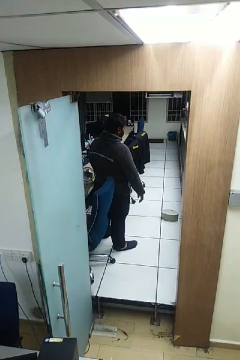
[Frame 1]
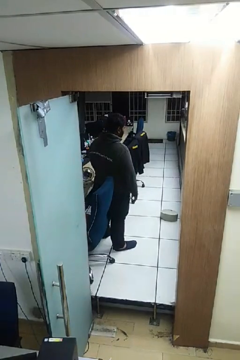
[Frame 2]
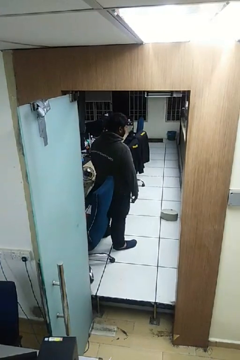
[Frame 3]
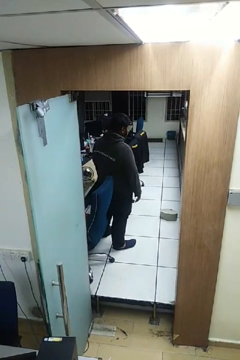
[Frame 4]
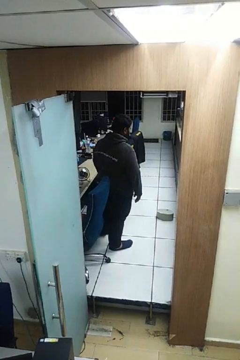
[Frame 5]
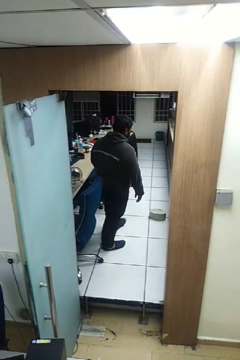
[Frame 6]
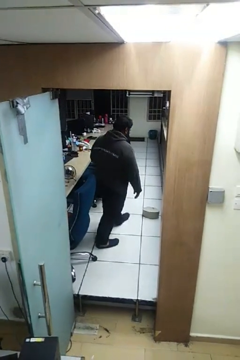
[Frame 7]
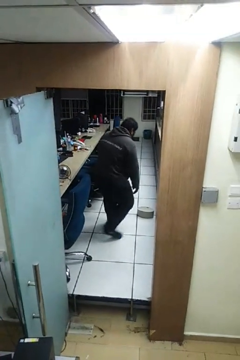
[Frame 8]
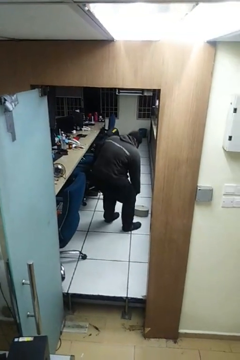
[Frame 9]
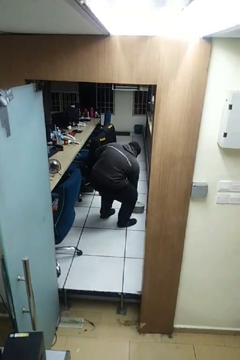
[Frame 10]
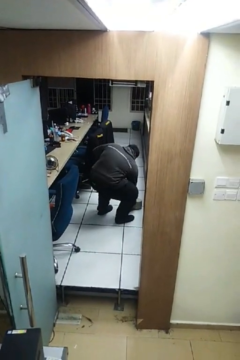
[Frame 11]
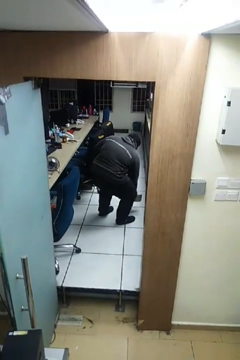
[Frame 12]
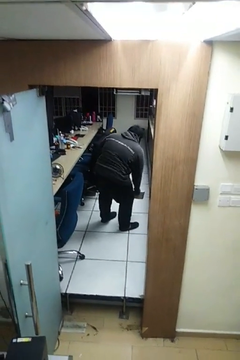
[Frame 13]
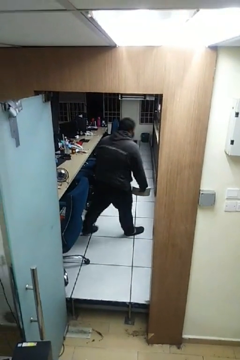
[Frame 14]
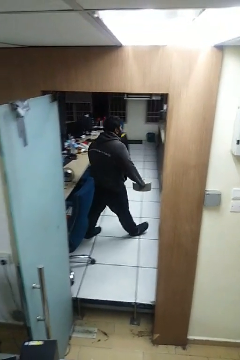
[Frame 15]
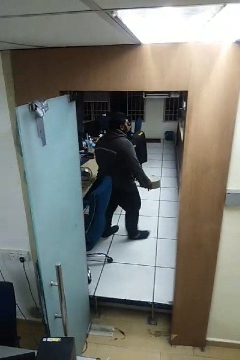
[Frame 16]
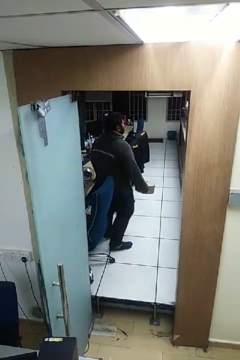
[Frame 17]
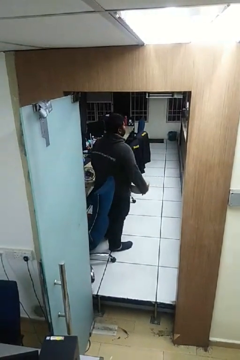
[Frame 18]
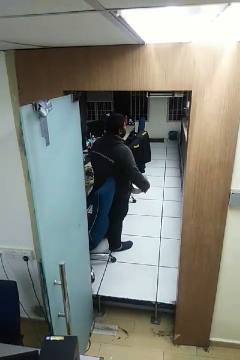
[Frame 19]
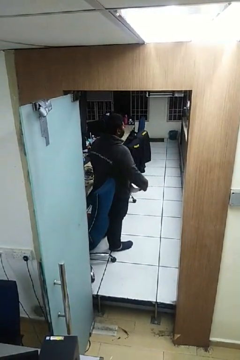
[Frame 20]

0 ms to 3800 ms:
person picks up object from floor

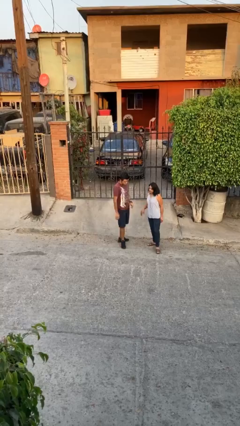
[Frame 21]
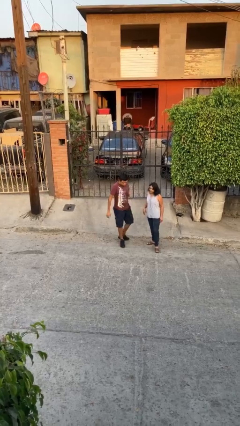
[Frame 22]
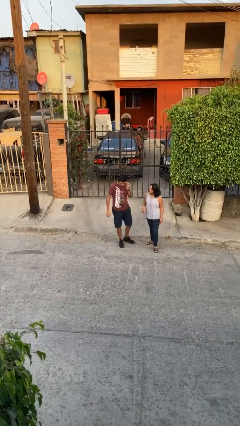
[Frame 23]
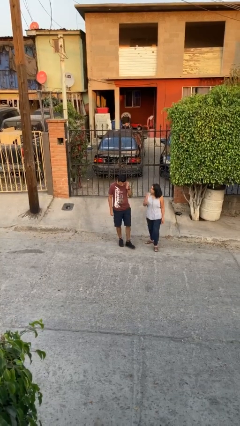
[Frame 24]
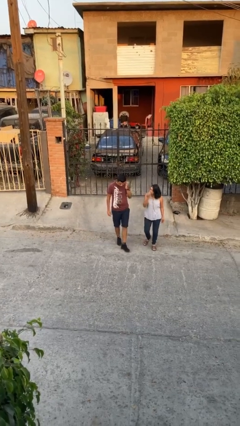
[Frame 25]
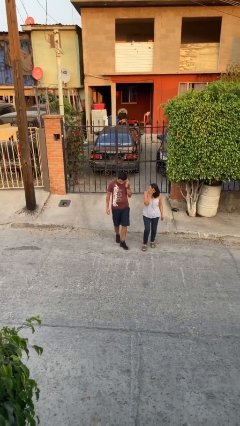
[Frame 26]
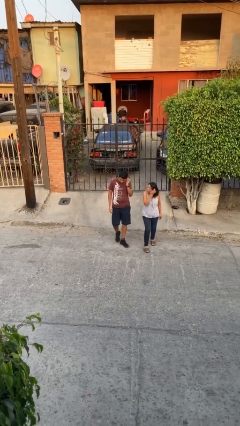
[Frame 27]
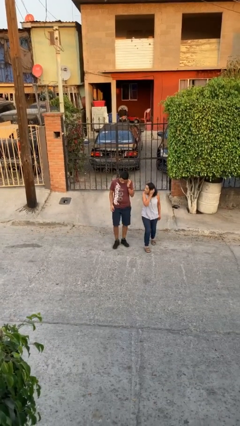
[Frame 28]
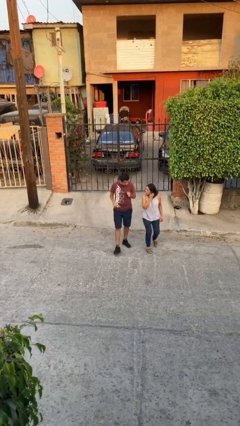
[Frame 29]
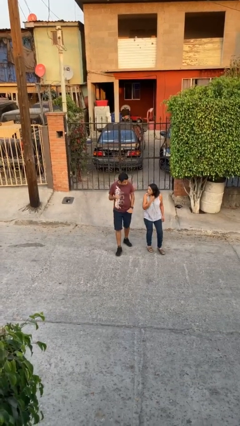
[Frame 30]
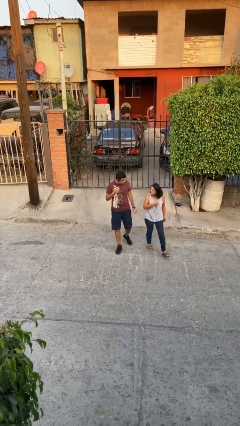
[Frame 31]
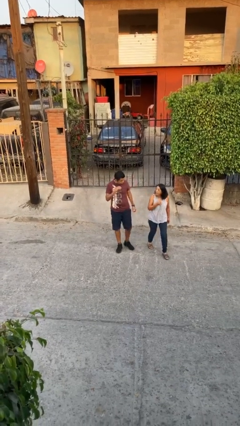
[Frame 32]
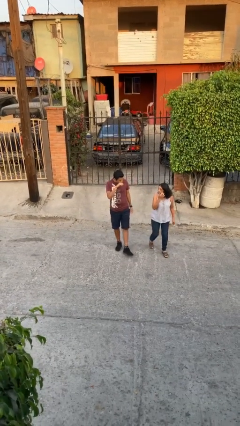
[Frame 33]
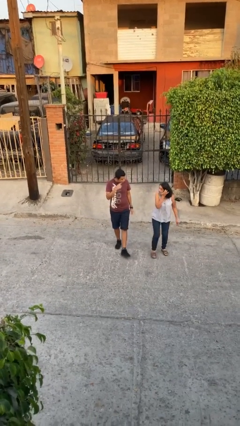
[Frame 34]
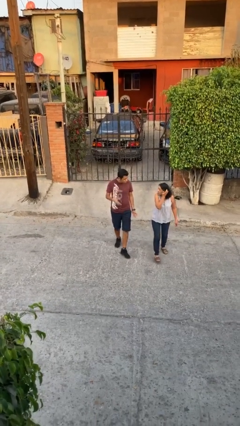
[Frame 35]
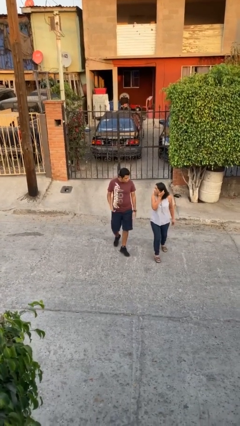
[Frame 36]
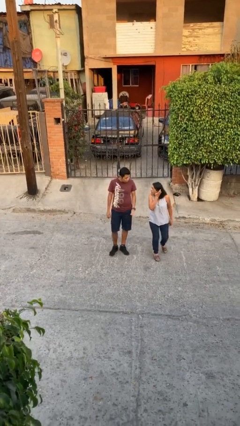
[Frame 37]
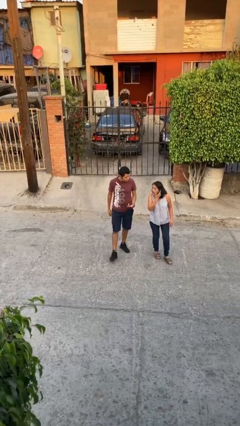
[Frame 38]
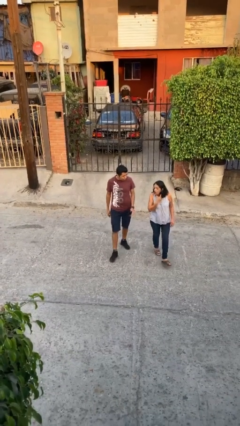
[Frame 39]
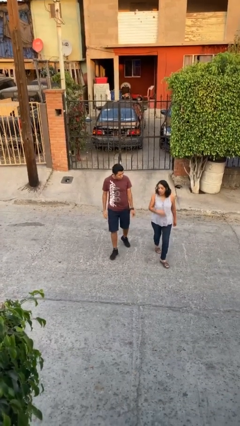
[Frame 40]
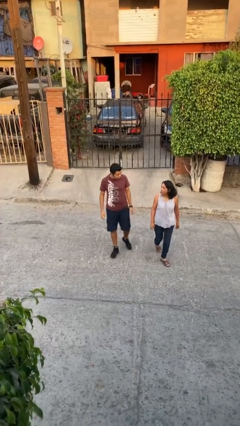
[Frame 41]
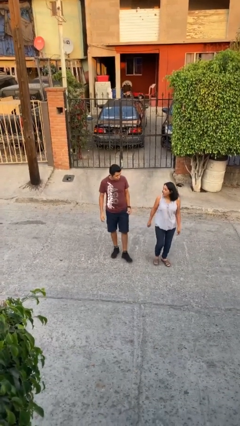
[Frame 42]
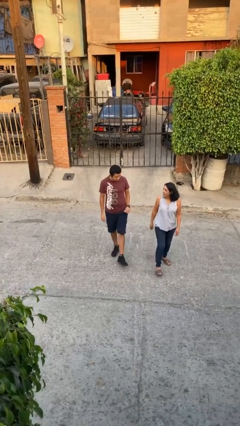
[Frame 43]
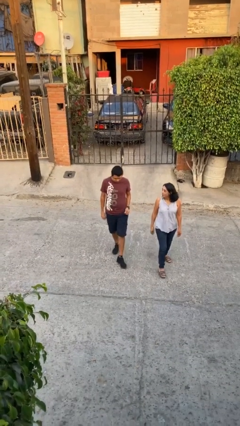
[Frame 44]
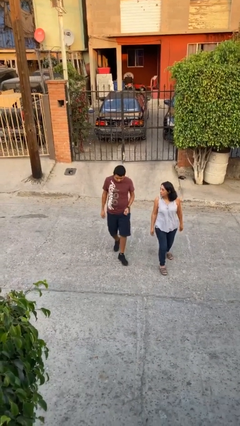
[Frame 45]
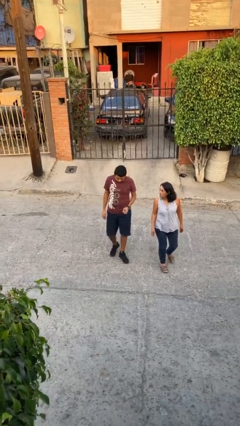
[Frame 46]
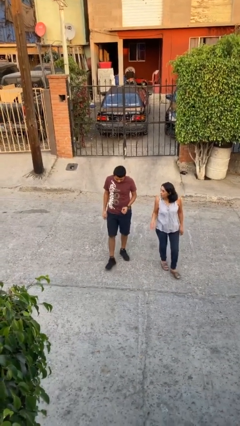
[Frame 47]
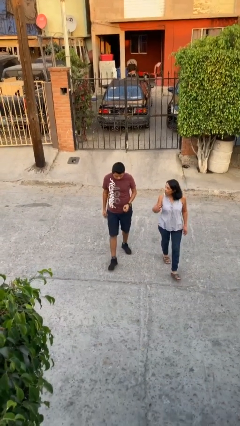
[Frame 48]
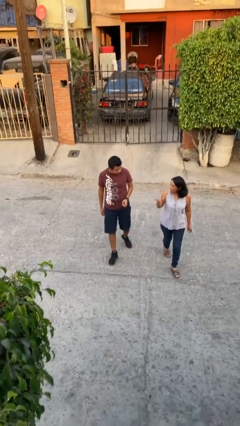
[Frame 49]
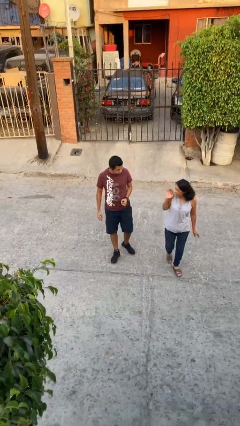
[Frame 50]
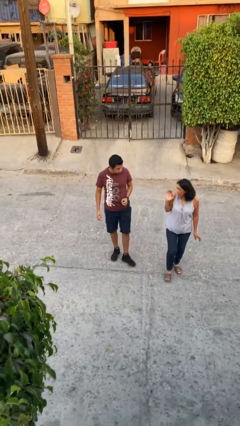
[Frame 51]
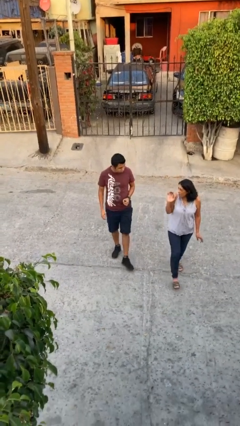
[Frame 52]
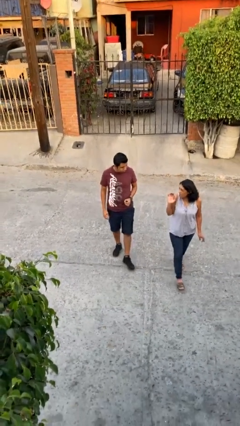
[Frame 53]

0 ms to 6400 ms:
person talks to person

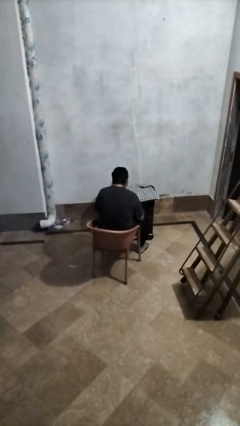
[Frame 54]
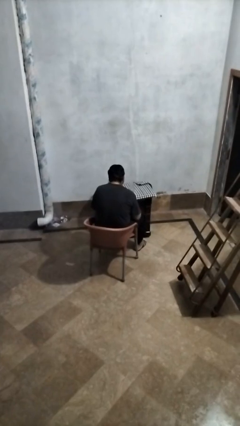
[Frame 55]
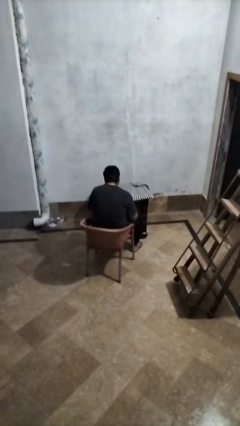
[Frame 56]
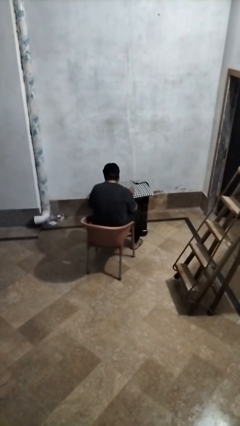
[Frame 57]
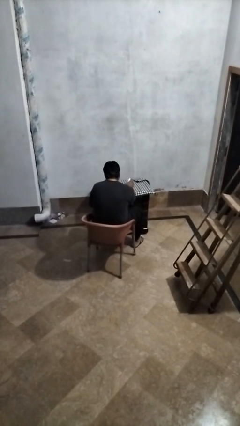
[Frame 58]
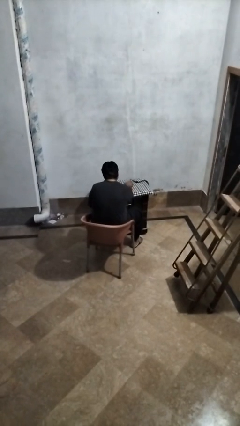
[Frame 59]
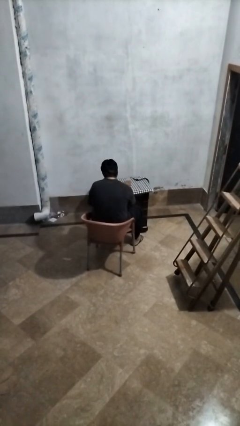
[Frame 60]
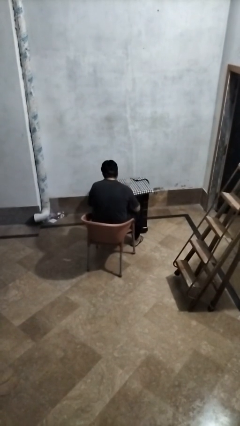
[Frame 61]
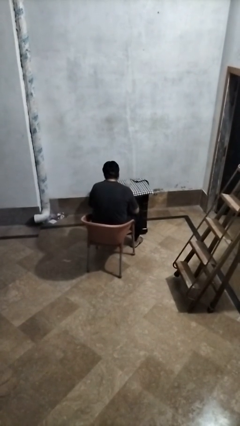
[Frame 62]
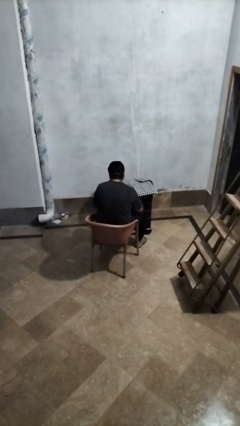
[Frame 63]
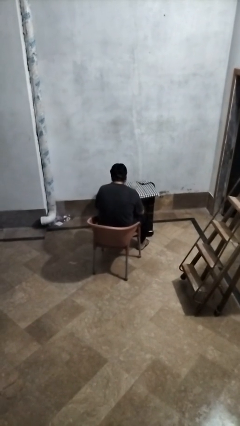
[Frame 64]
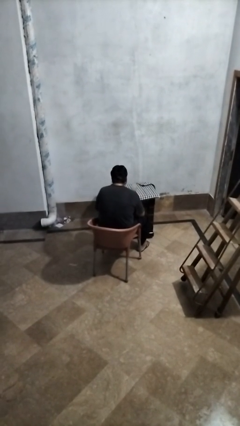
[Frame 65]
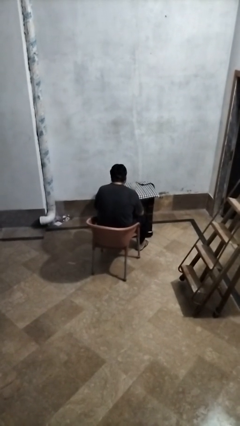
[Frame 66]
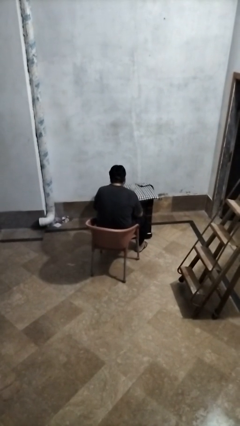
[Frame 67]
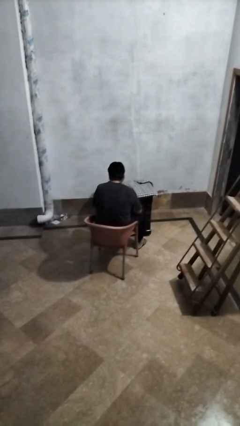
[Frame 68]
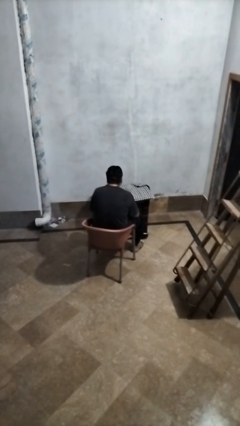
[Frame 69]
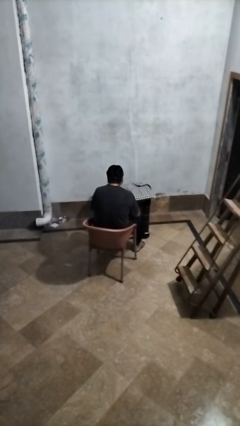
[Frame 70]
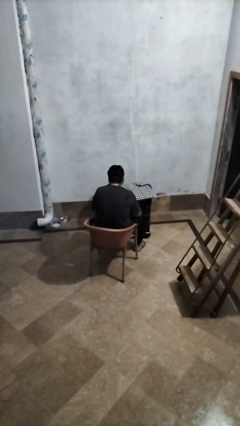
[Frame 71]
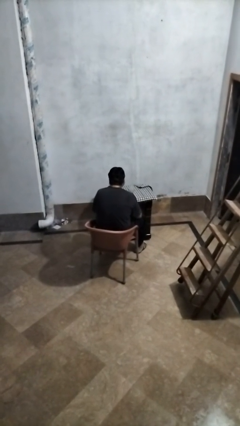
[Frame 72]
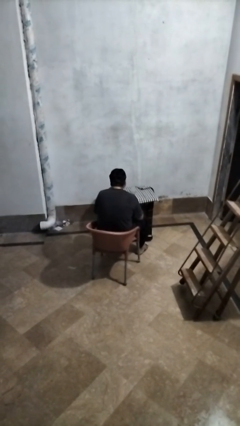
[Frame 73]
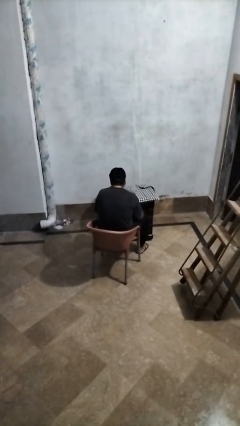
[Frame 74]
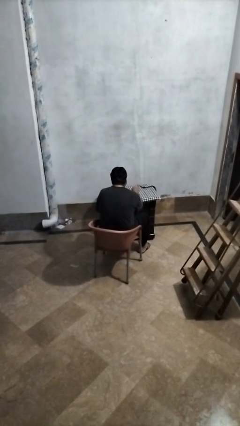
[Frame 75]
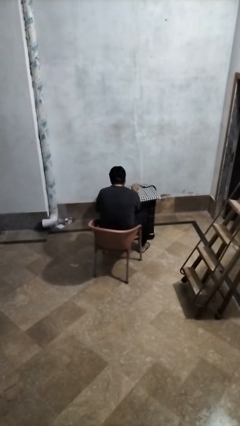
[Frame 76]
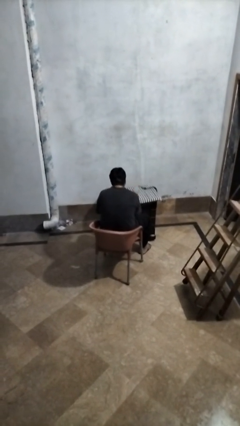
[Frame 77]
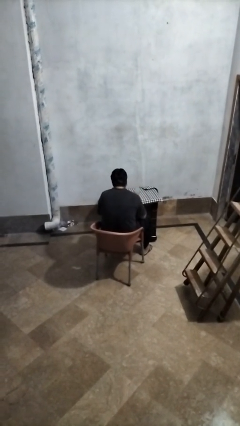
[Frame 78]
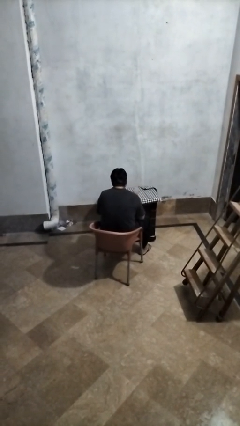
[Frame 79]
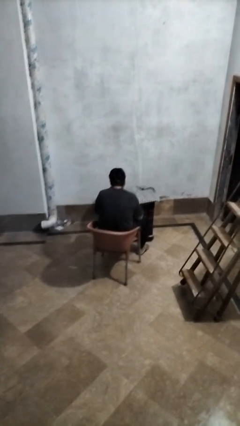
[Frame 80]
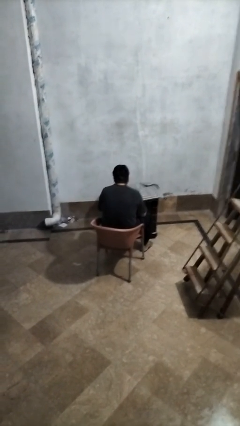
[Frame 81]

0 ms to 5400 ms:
person knocks over glass

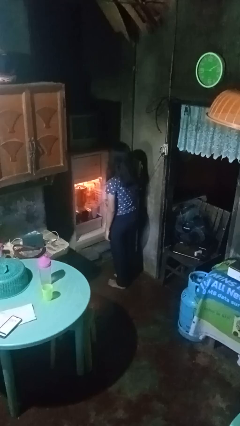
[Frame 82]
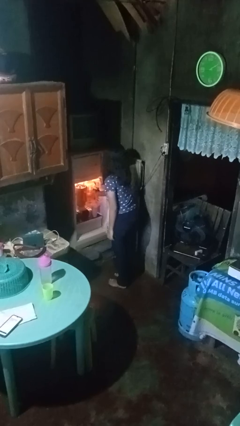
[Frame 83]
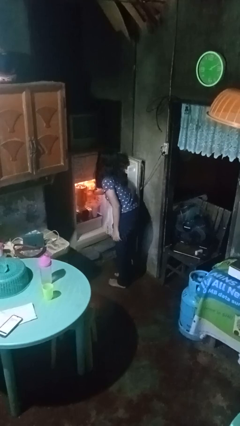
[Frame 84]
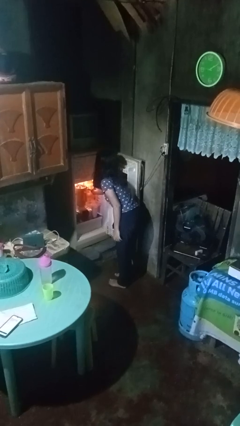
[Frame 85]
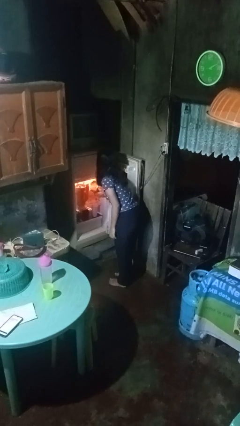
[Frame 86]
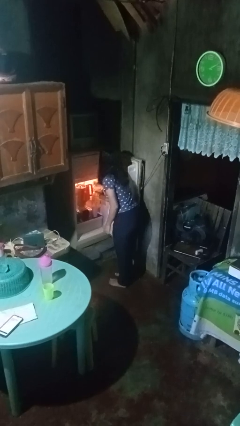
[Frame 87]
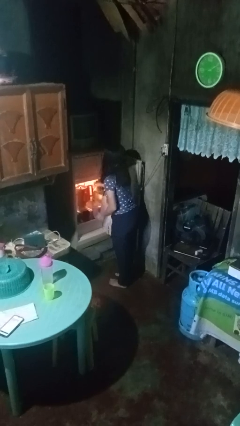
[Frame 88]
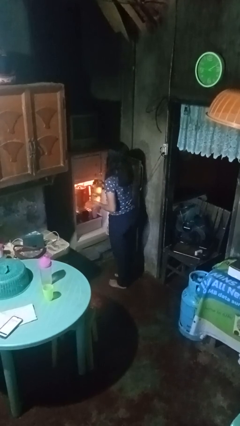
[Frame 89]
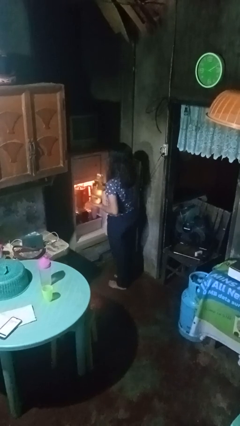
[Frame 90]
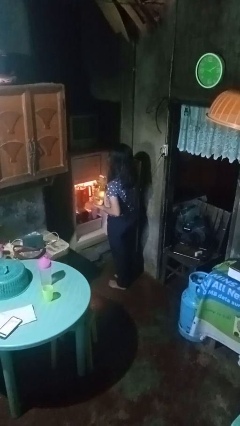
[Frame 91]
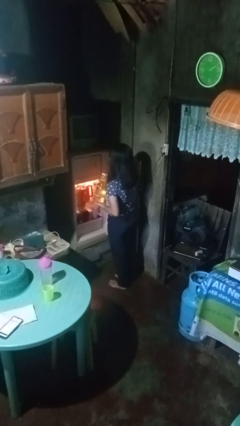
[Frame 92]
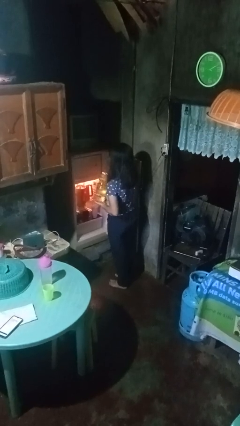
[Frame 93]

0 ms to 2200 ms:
person takes object from refrigerator

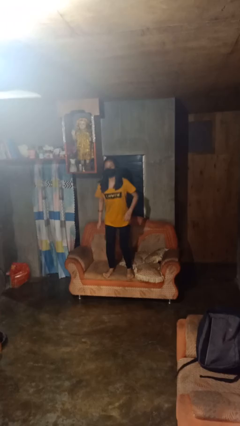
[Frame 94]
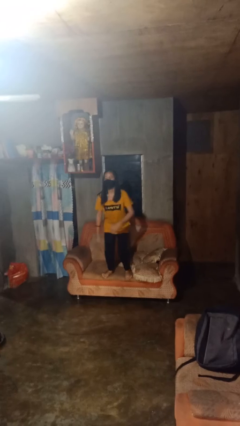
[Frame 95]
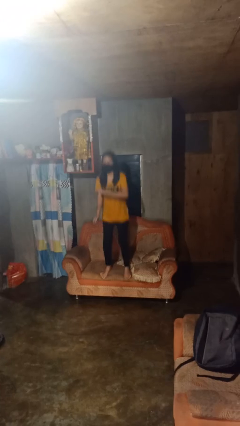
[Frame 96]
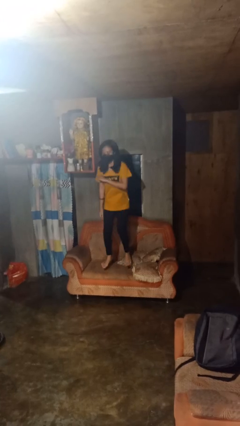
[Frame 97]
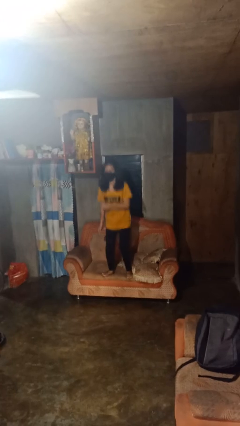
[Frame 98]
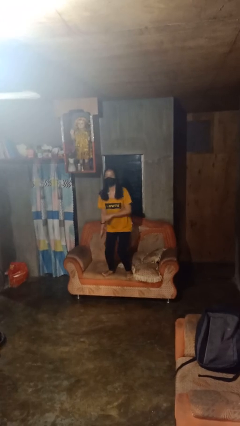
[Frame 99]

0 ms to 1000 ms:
person jumps on couch
